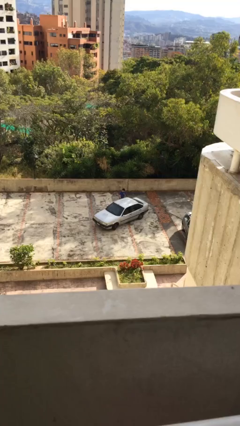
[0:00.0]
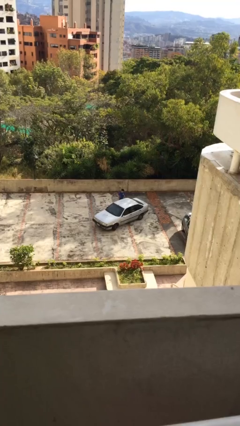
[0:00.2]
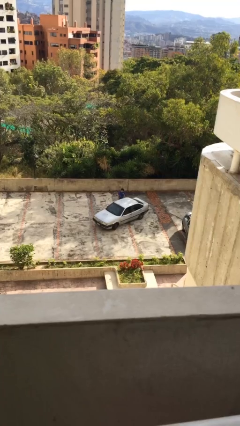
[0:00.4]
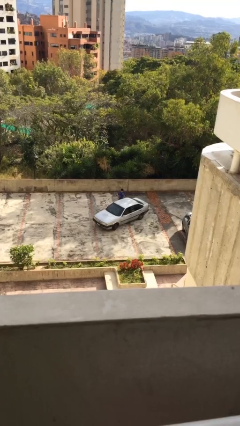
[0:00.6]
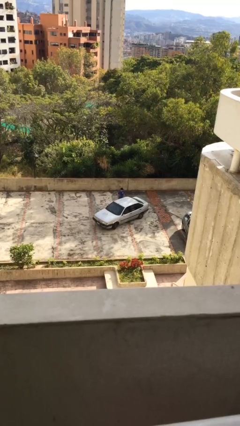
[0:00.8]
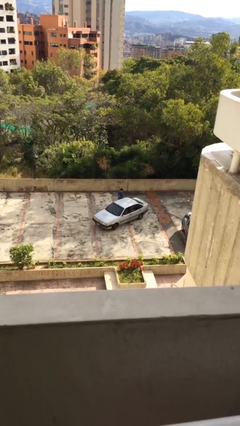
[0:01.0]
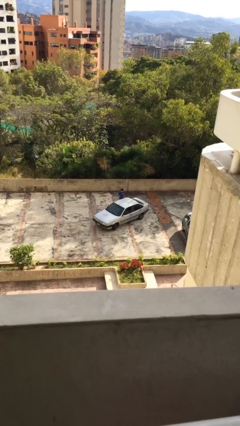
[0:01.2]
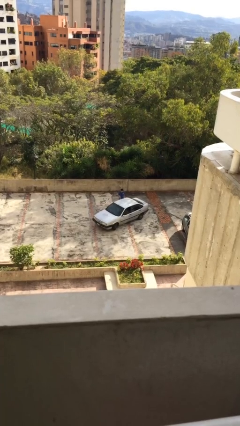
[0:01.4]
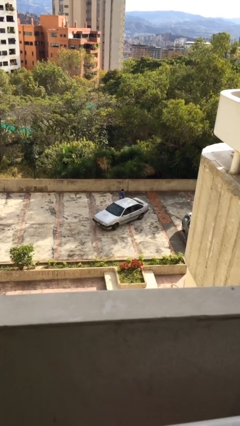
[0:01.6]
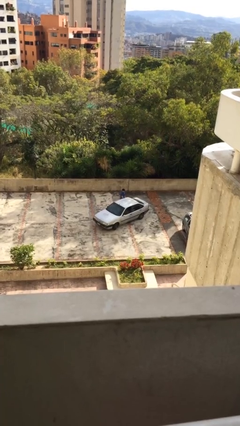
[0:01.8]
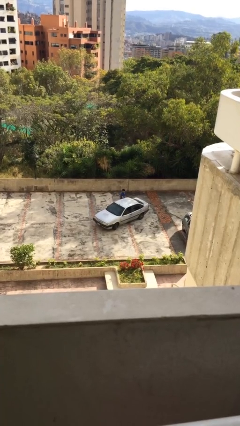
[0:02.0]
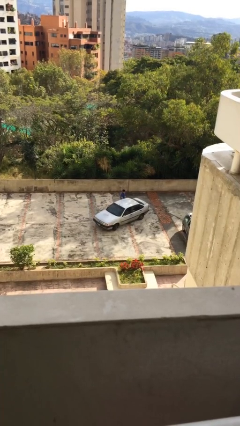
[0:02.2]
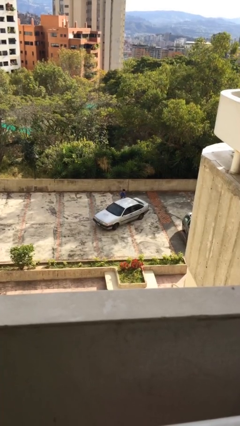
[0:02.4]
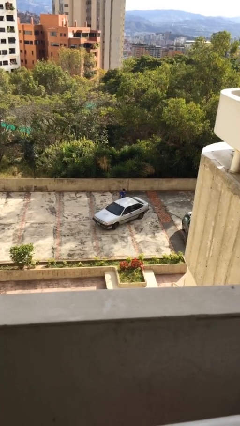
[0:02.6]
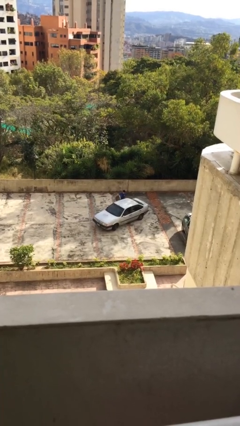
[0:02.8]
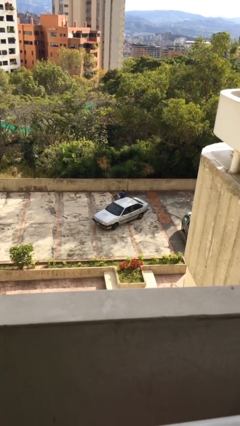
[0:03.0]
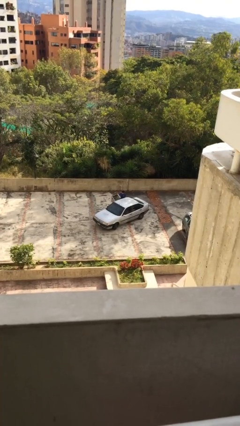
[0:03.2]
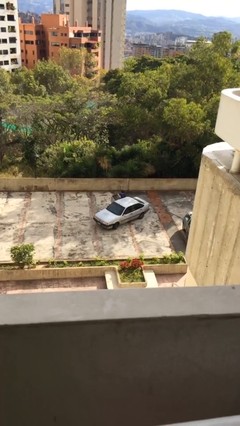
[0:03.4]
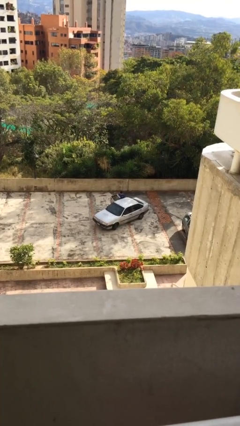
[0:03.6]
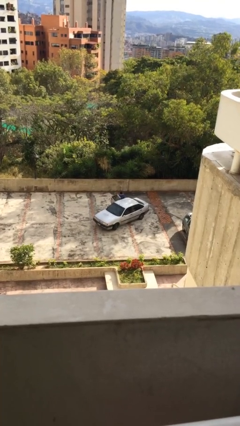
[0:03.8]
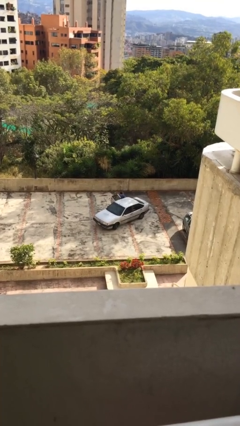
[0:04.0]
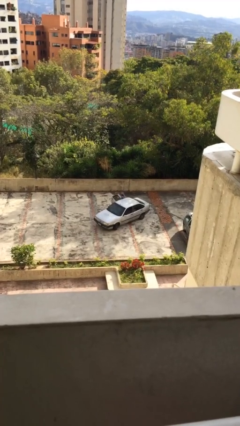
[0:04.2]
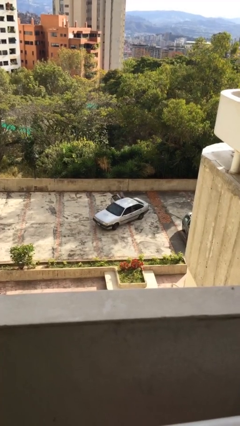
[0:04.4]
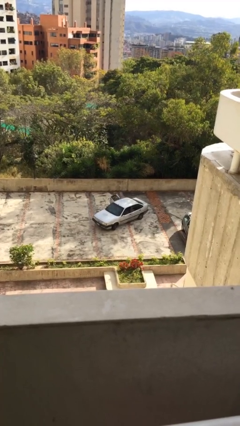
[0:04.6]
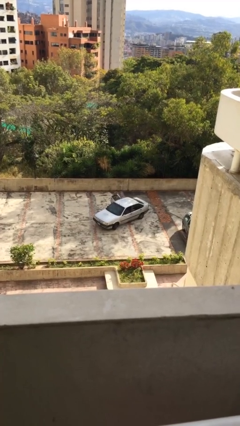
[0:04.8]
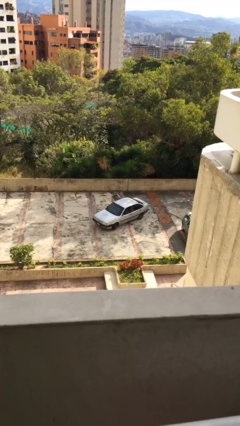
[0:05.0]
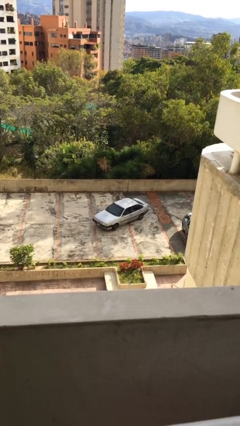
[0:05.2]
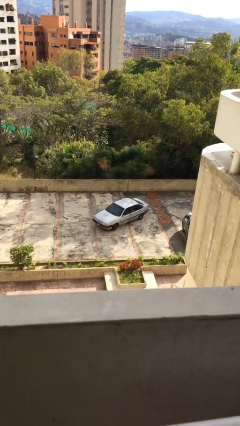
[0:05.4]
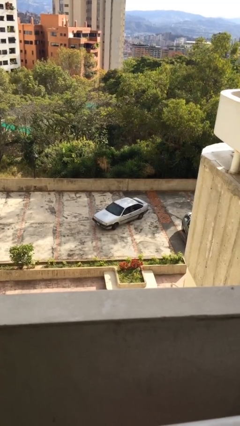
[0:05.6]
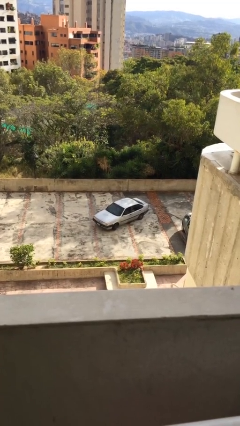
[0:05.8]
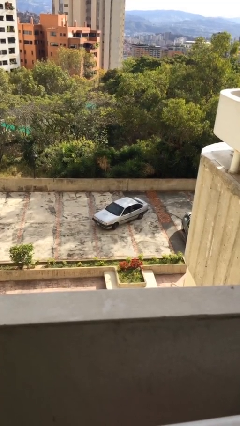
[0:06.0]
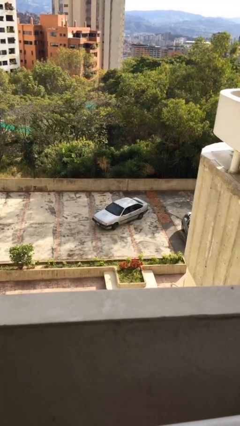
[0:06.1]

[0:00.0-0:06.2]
car picks up person

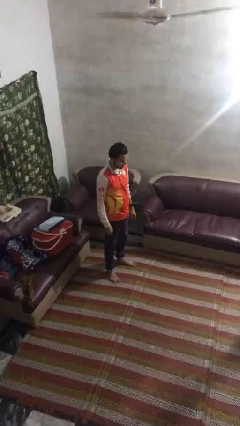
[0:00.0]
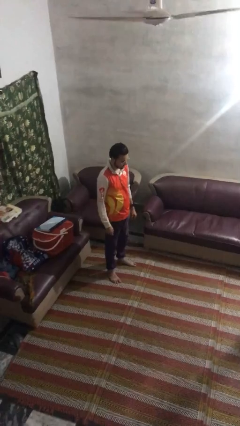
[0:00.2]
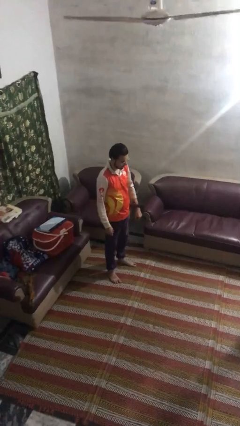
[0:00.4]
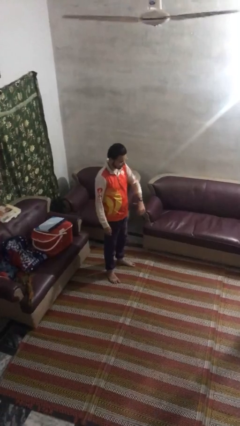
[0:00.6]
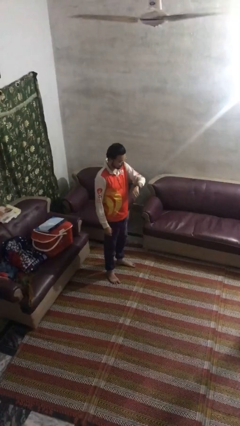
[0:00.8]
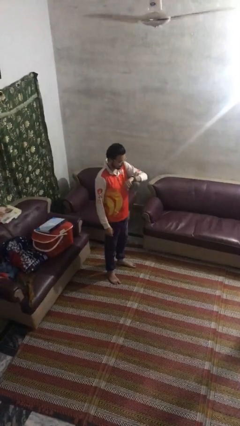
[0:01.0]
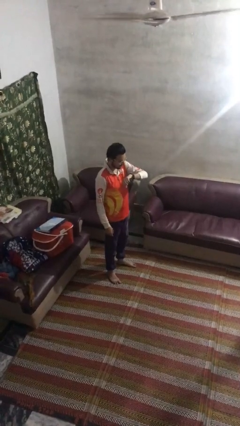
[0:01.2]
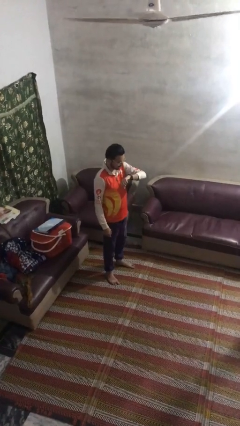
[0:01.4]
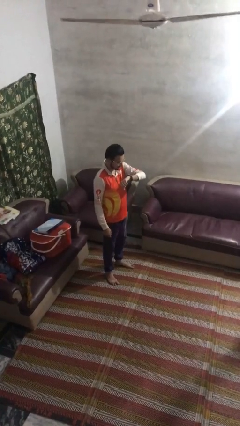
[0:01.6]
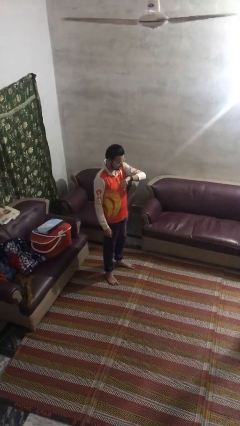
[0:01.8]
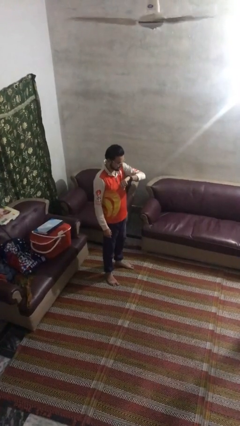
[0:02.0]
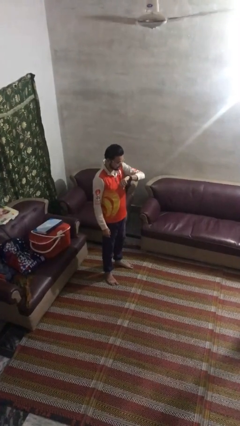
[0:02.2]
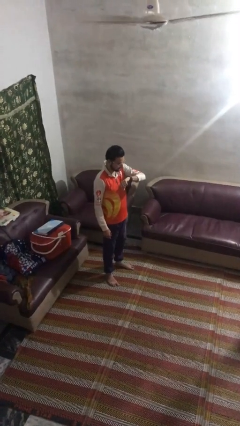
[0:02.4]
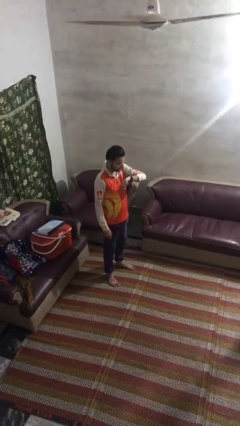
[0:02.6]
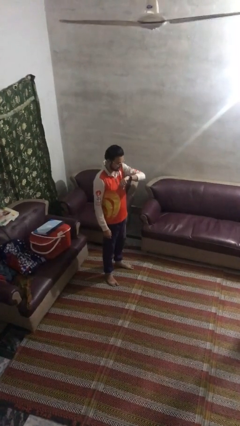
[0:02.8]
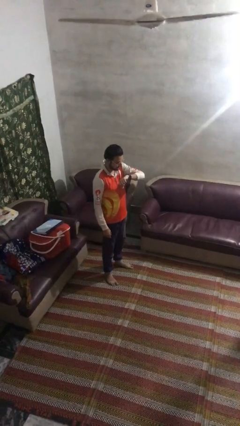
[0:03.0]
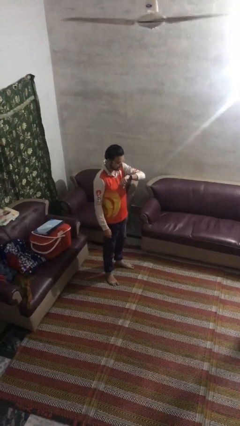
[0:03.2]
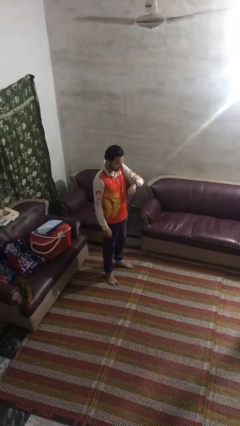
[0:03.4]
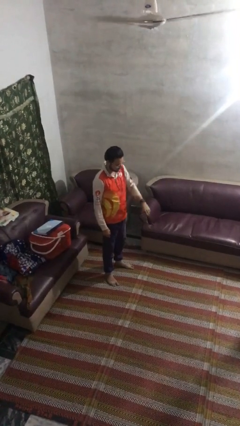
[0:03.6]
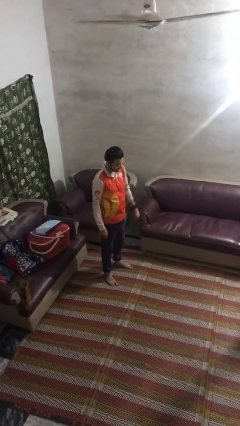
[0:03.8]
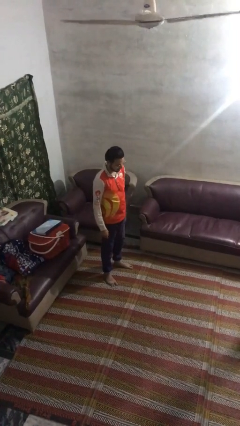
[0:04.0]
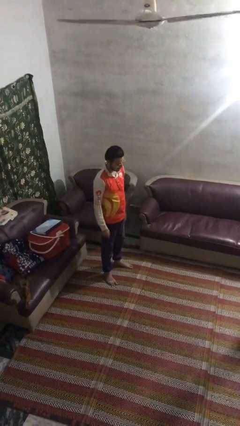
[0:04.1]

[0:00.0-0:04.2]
person looks at wristwatch

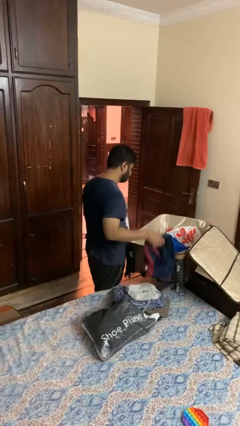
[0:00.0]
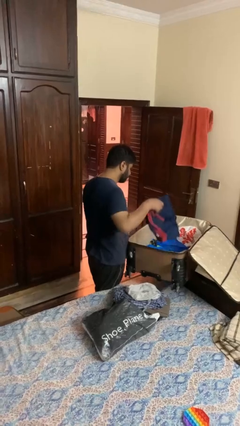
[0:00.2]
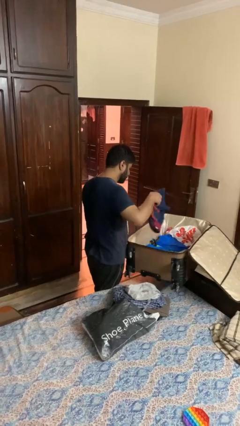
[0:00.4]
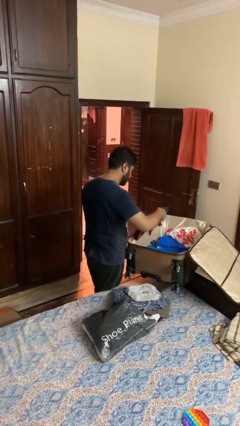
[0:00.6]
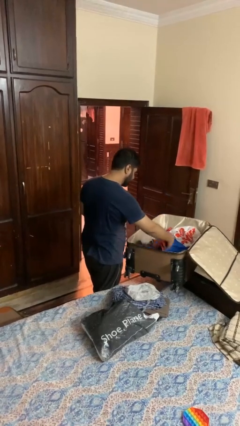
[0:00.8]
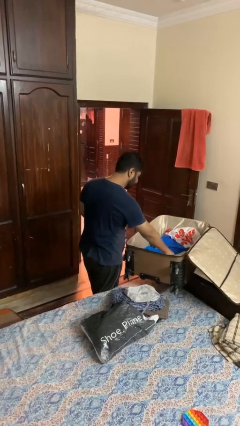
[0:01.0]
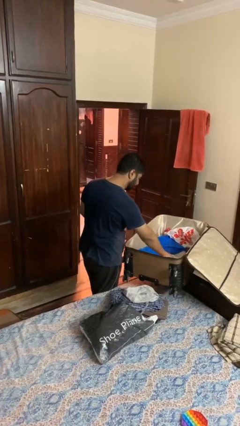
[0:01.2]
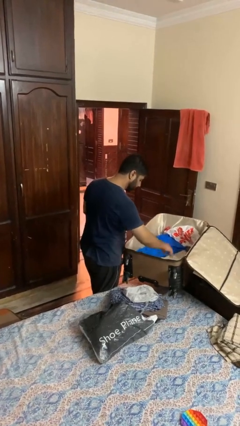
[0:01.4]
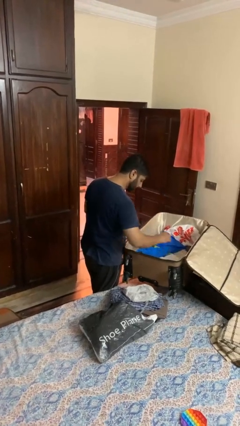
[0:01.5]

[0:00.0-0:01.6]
person loads clothes into suitcase

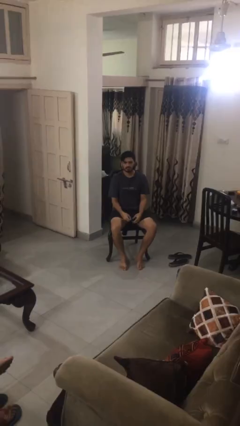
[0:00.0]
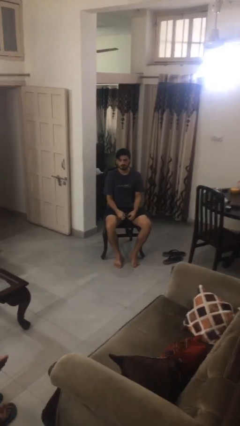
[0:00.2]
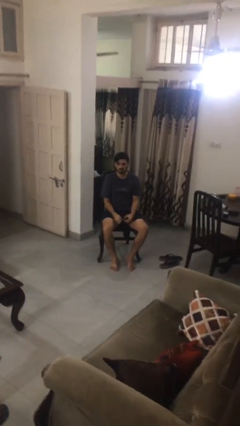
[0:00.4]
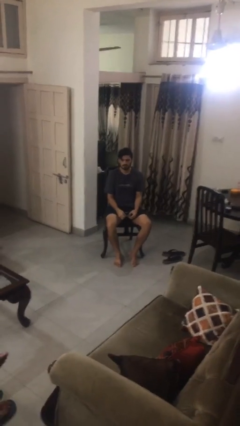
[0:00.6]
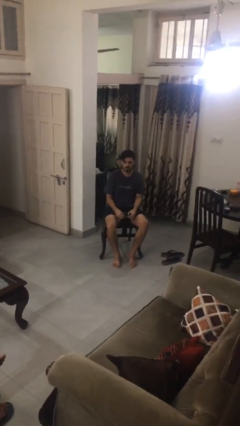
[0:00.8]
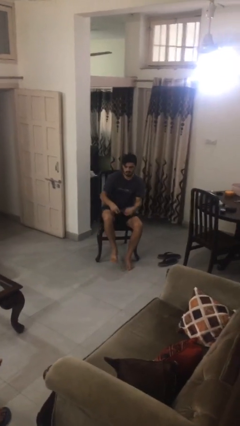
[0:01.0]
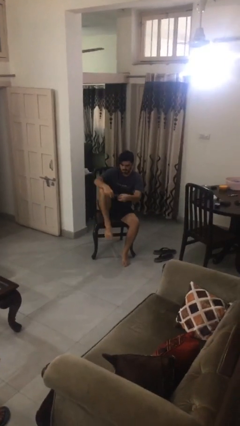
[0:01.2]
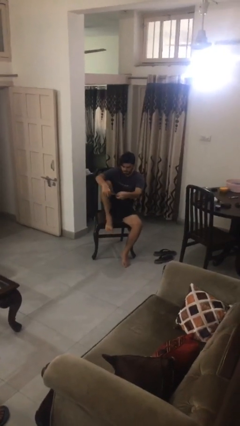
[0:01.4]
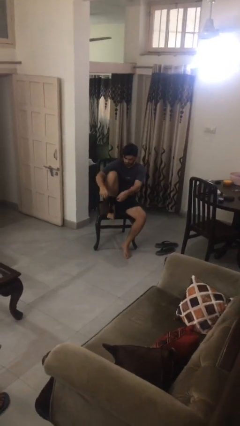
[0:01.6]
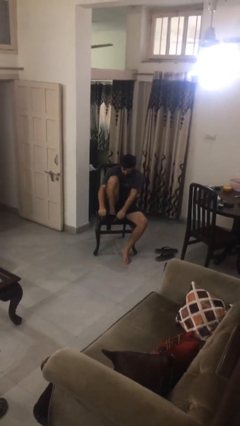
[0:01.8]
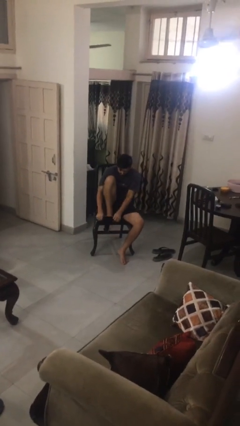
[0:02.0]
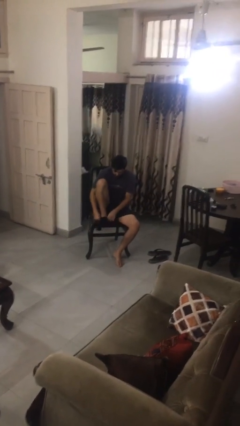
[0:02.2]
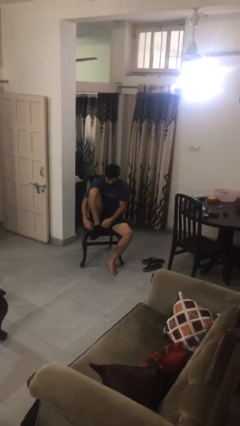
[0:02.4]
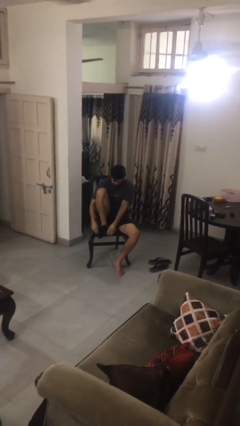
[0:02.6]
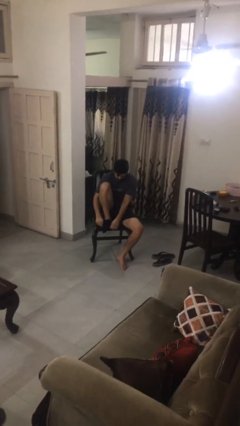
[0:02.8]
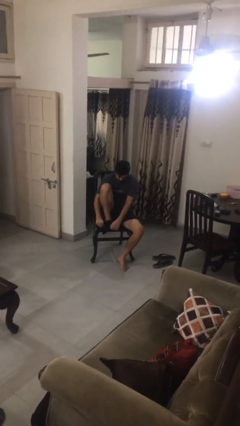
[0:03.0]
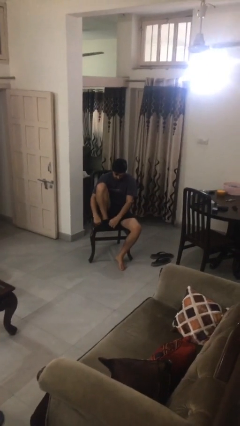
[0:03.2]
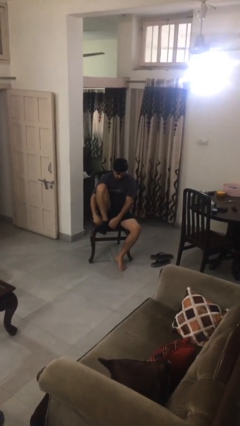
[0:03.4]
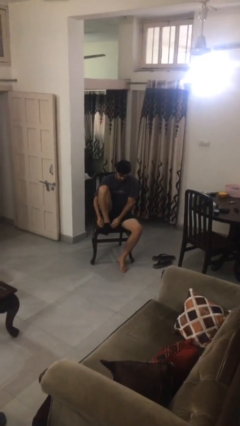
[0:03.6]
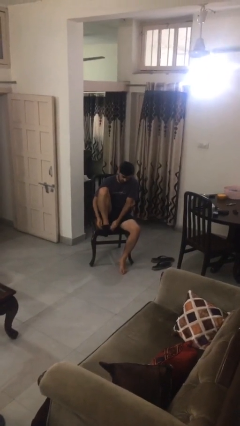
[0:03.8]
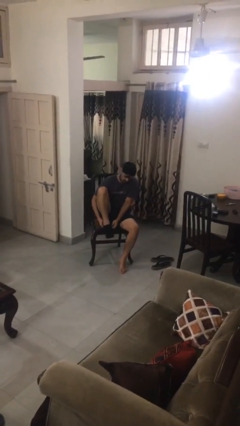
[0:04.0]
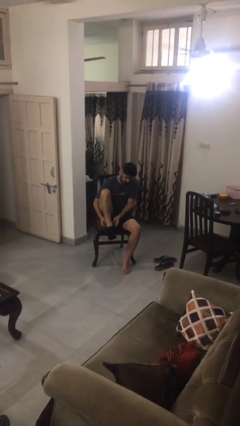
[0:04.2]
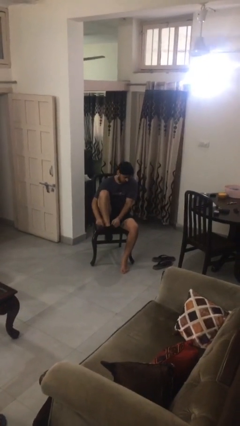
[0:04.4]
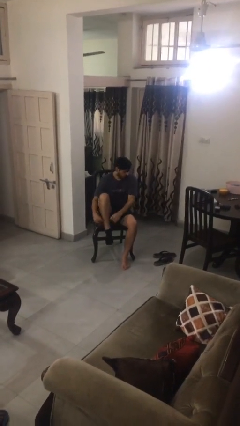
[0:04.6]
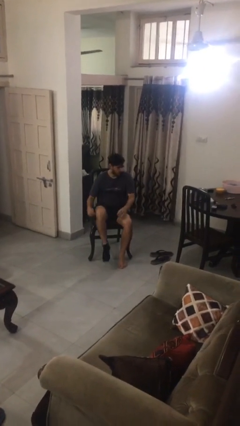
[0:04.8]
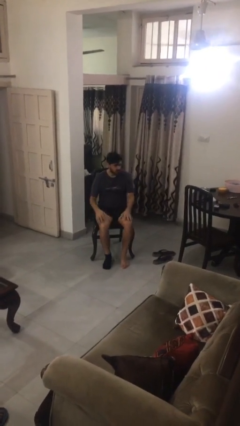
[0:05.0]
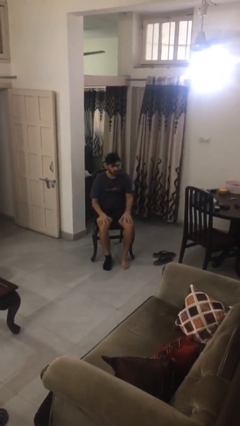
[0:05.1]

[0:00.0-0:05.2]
person puts on socks

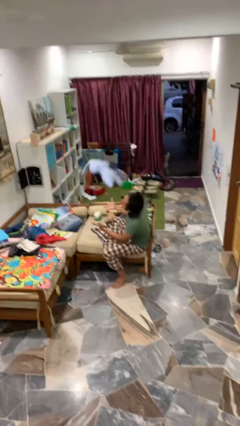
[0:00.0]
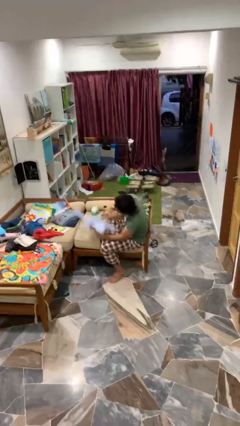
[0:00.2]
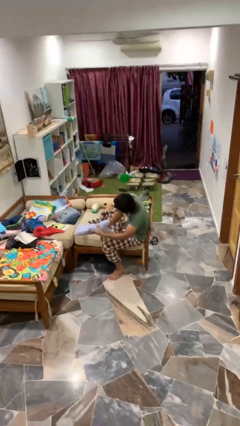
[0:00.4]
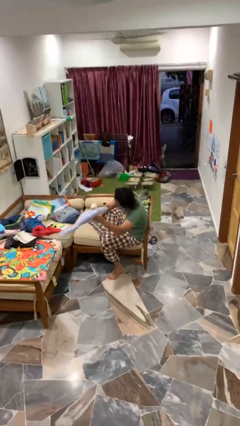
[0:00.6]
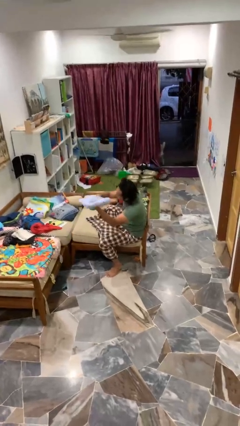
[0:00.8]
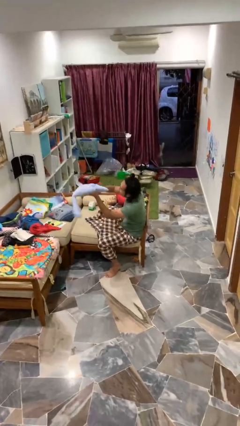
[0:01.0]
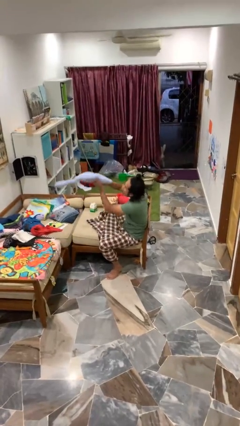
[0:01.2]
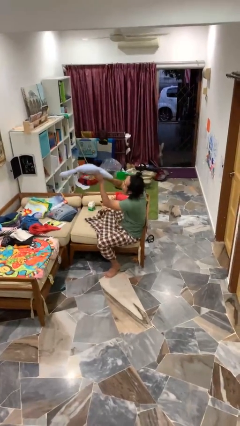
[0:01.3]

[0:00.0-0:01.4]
person catches dropped object
